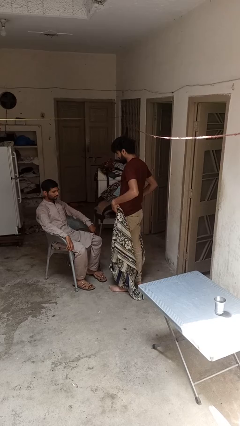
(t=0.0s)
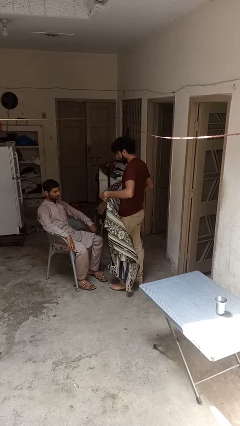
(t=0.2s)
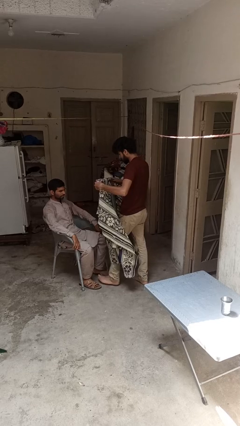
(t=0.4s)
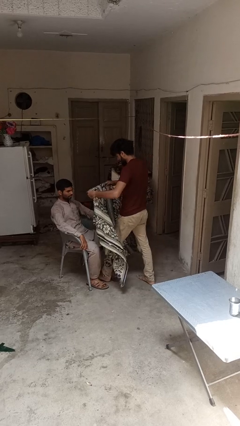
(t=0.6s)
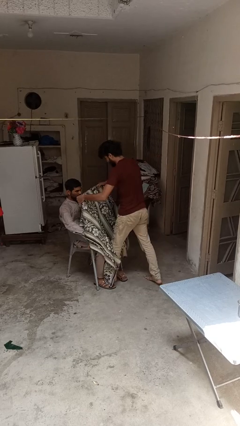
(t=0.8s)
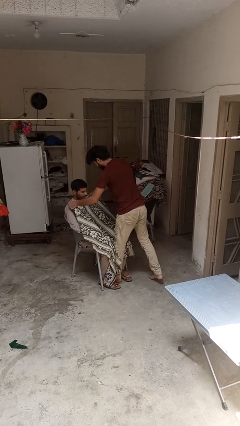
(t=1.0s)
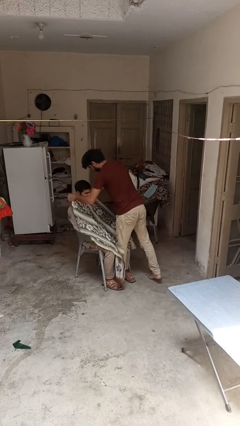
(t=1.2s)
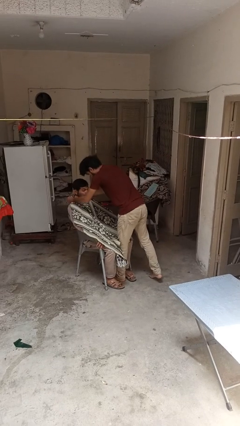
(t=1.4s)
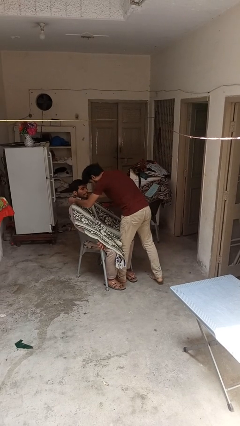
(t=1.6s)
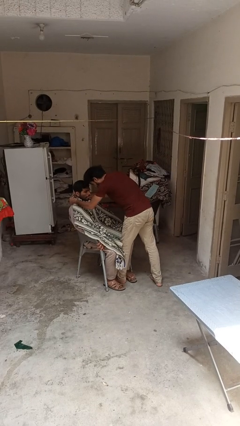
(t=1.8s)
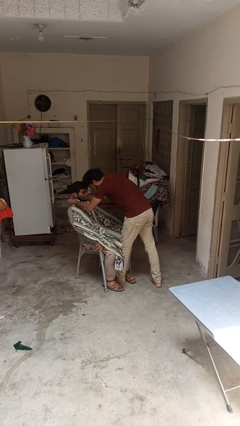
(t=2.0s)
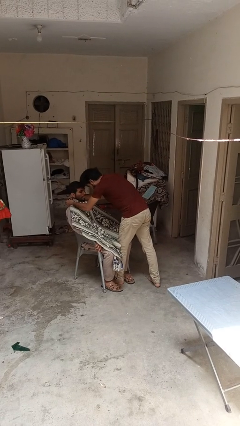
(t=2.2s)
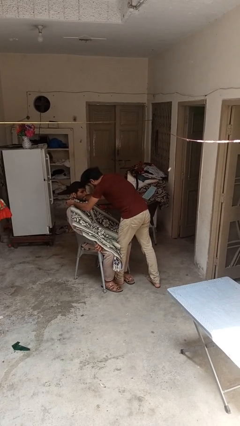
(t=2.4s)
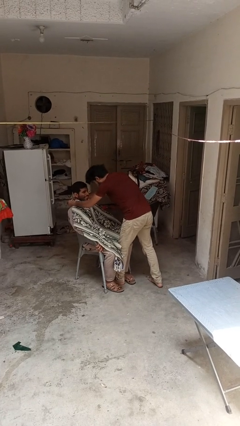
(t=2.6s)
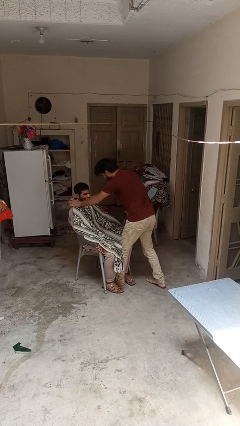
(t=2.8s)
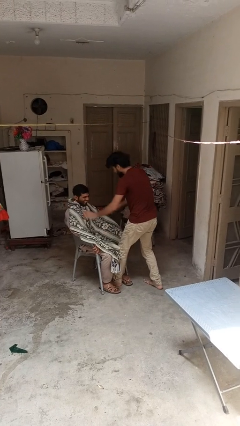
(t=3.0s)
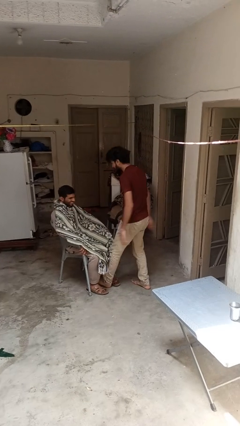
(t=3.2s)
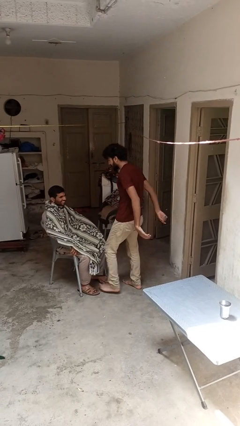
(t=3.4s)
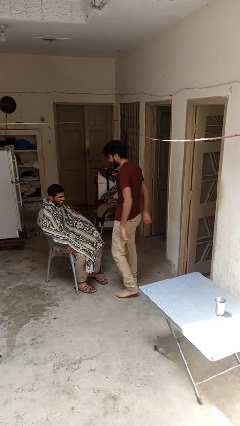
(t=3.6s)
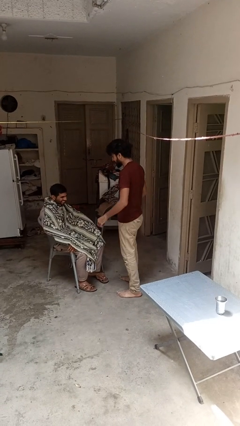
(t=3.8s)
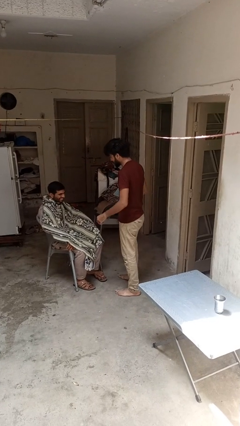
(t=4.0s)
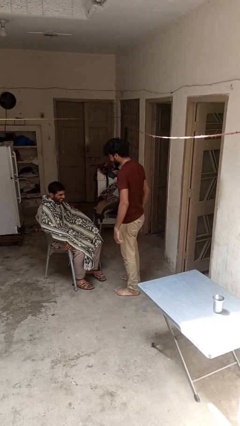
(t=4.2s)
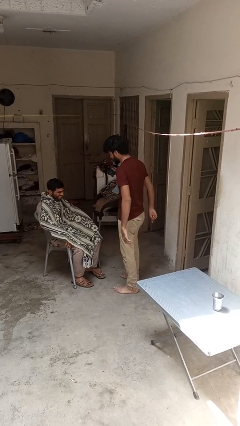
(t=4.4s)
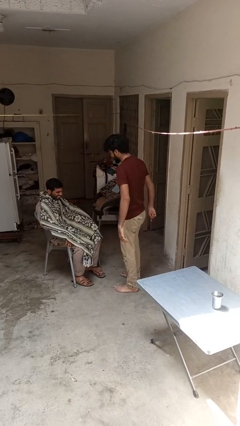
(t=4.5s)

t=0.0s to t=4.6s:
person covers friend with blanket

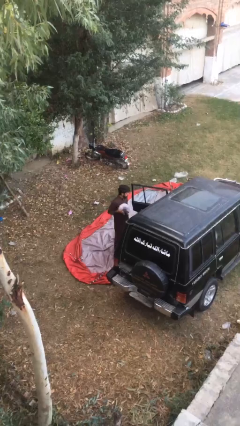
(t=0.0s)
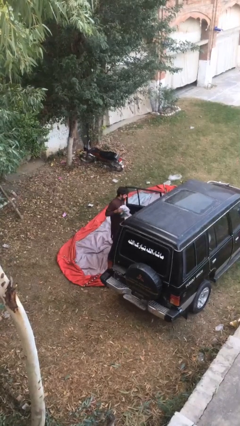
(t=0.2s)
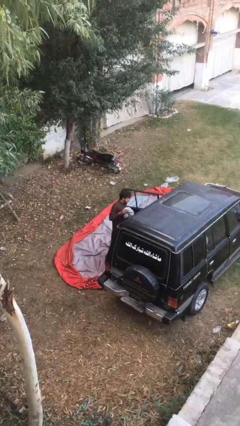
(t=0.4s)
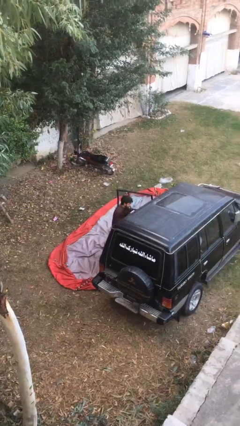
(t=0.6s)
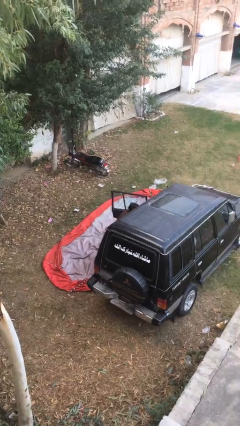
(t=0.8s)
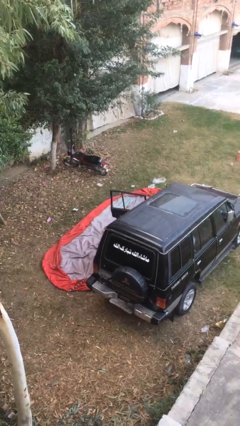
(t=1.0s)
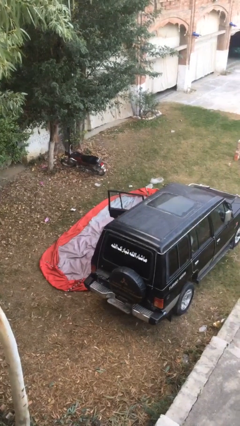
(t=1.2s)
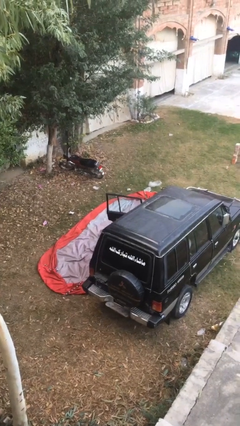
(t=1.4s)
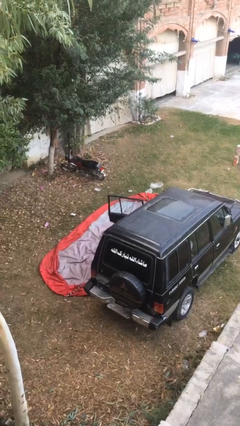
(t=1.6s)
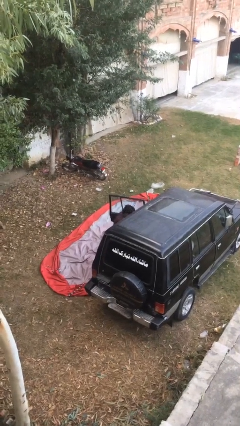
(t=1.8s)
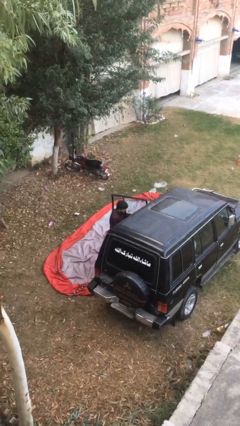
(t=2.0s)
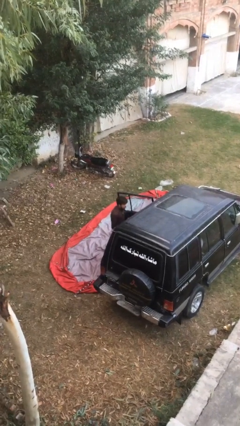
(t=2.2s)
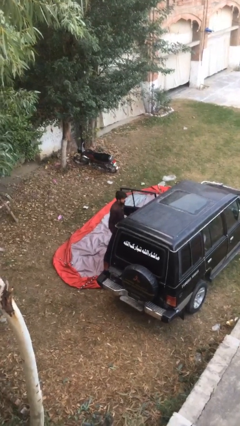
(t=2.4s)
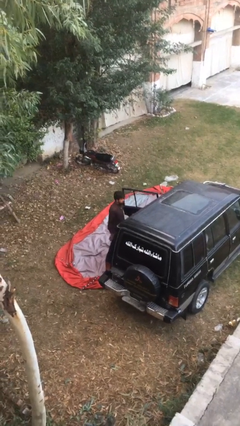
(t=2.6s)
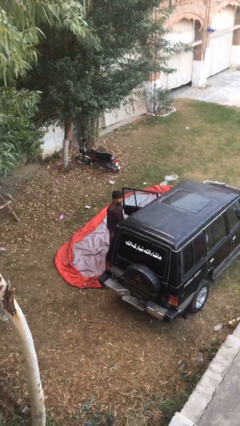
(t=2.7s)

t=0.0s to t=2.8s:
person loads car

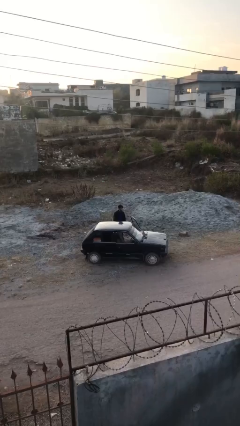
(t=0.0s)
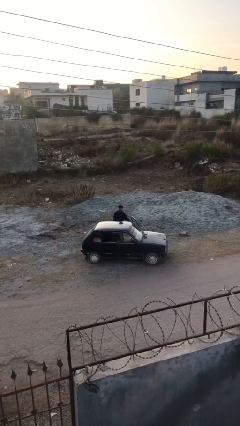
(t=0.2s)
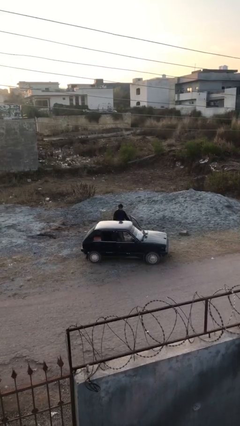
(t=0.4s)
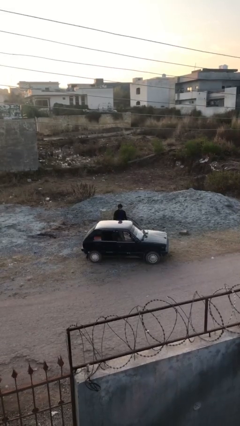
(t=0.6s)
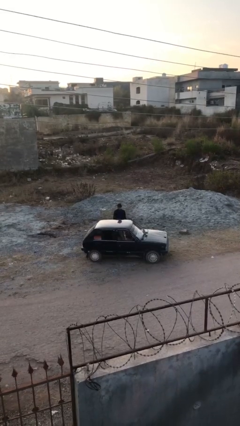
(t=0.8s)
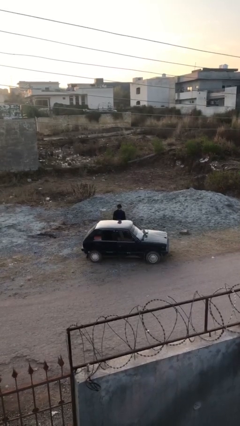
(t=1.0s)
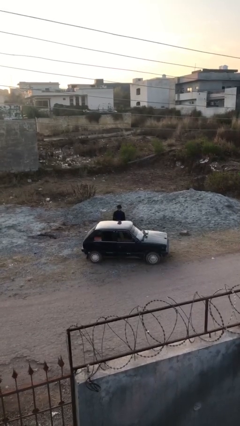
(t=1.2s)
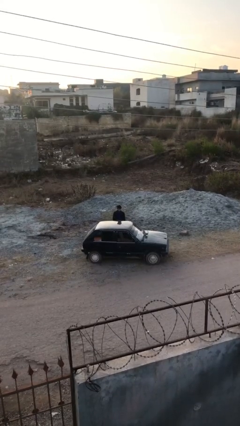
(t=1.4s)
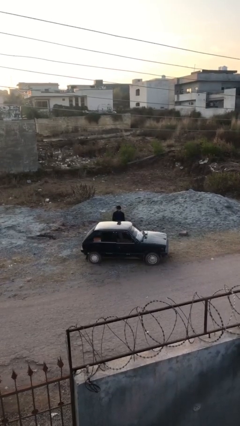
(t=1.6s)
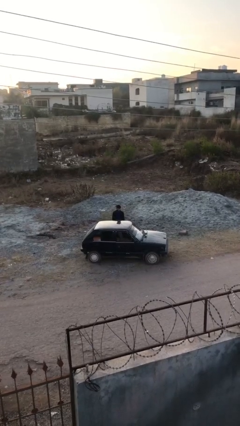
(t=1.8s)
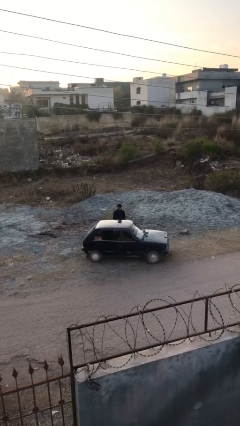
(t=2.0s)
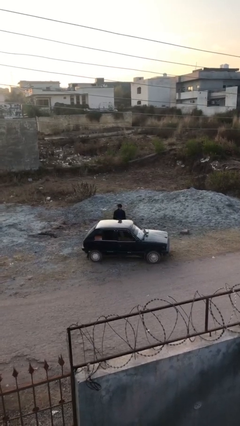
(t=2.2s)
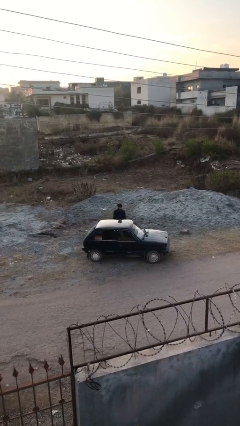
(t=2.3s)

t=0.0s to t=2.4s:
person closes car door

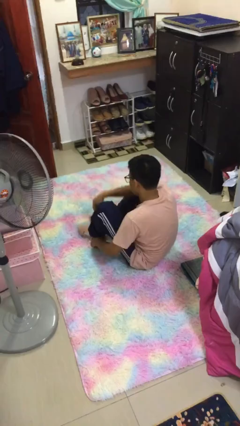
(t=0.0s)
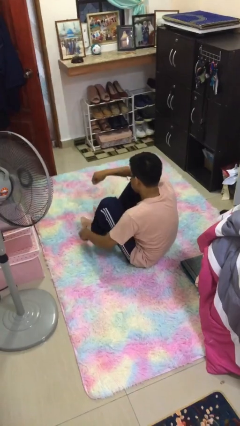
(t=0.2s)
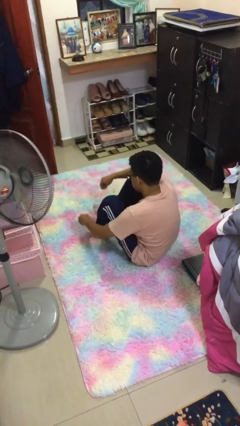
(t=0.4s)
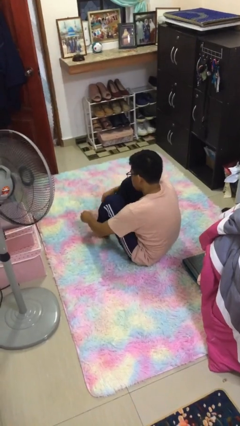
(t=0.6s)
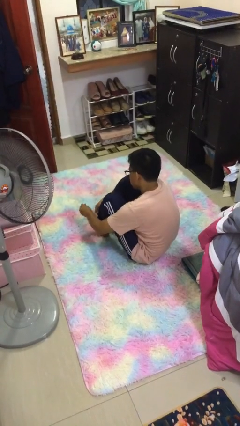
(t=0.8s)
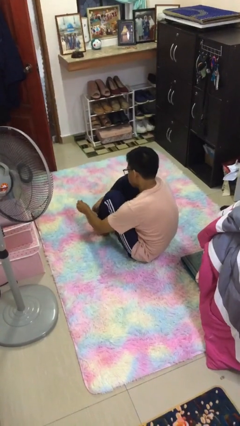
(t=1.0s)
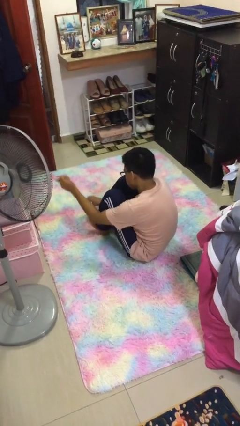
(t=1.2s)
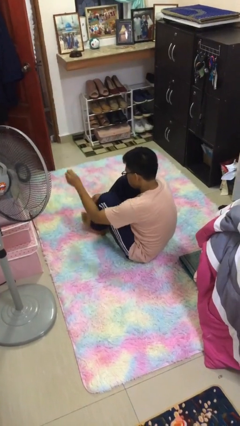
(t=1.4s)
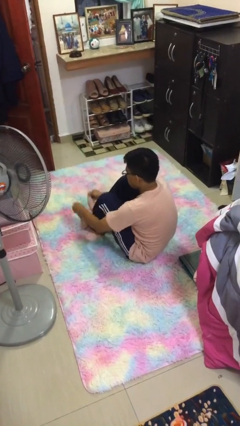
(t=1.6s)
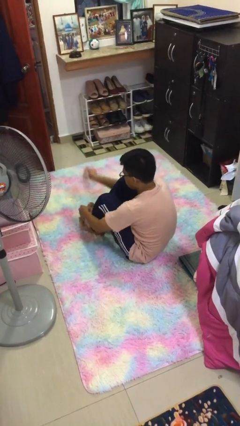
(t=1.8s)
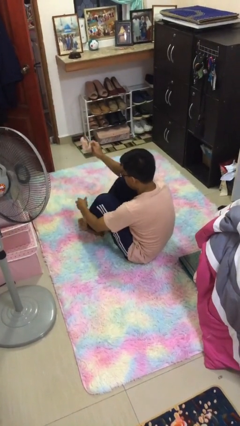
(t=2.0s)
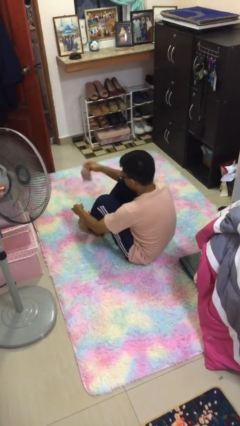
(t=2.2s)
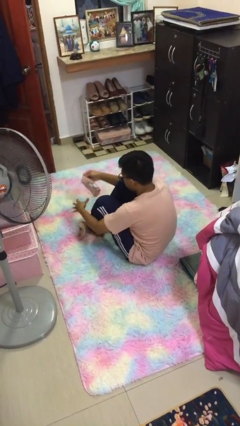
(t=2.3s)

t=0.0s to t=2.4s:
person takes off socks

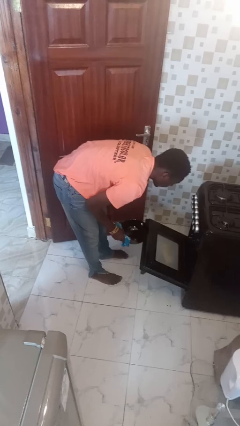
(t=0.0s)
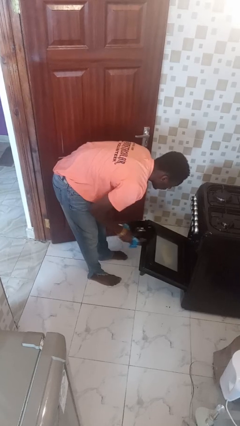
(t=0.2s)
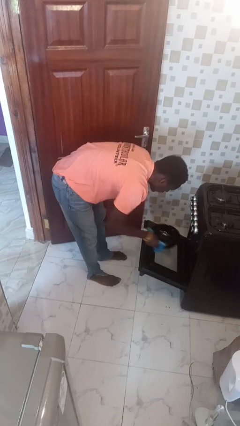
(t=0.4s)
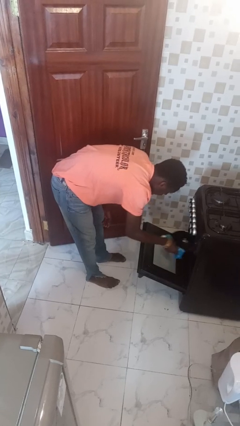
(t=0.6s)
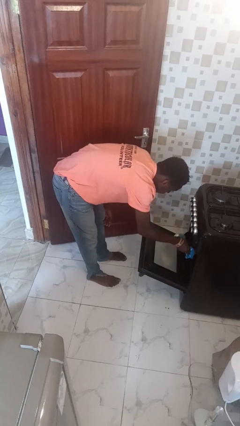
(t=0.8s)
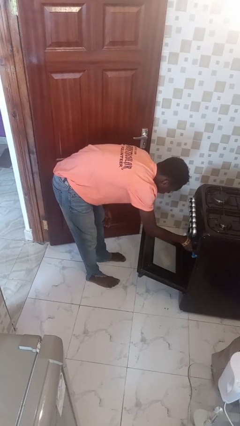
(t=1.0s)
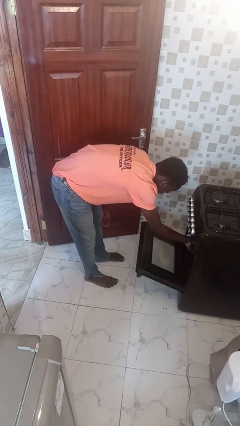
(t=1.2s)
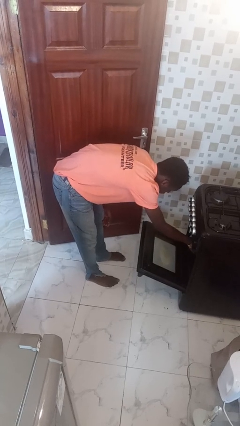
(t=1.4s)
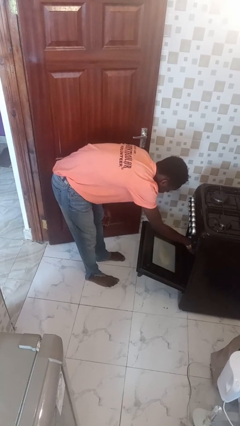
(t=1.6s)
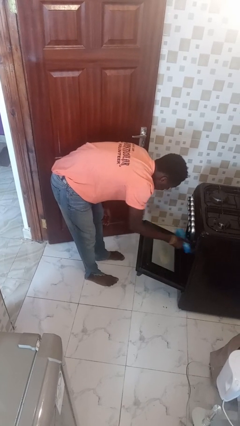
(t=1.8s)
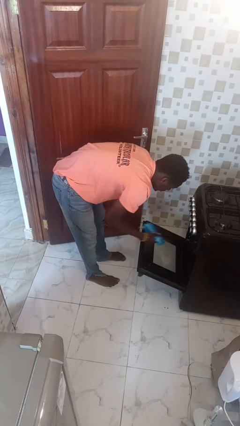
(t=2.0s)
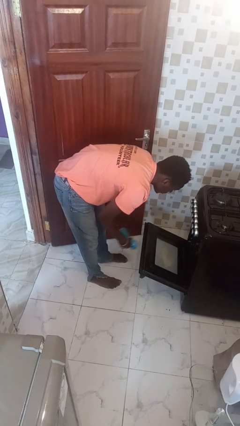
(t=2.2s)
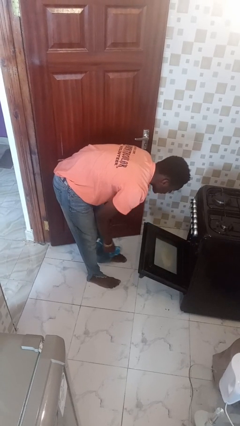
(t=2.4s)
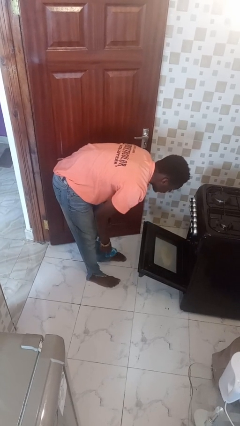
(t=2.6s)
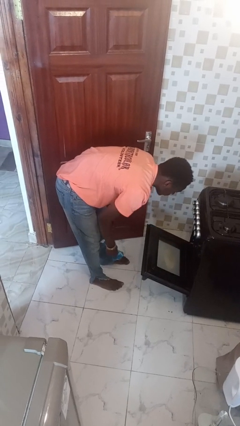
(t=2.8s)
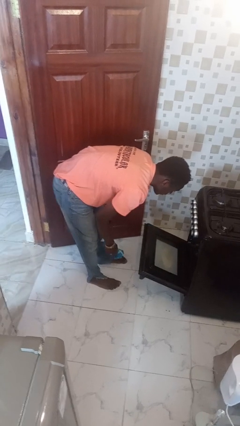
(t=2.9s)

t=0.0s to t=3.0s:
person puts object into oven

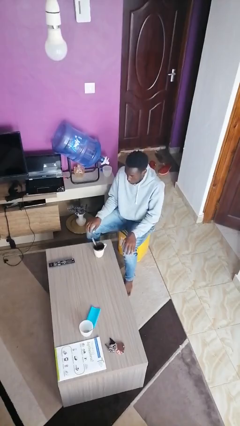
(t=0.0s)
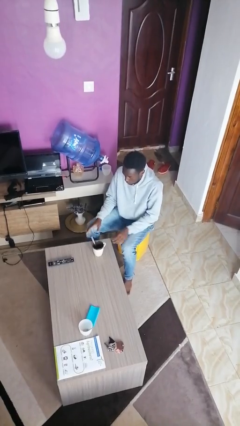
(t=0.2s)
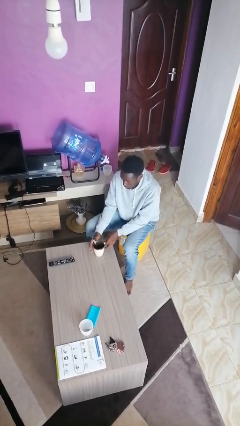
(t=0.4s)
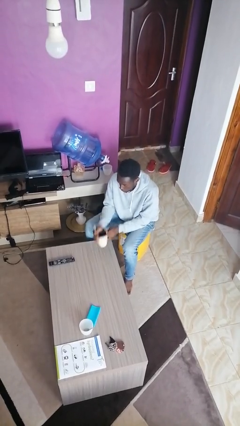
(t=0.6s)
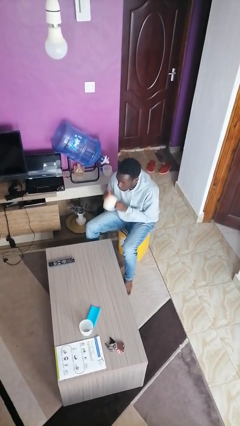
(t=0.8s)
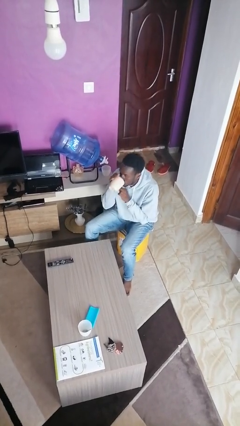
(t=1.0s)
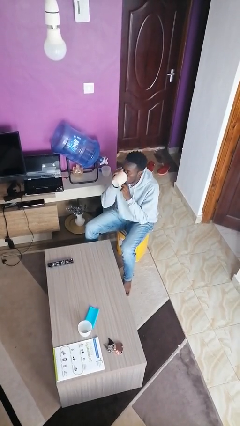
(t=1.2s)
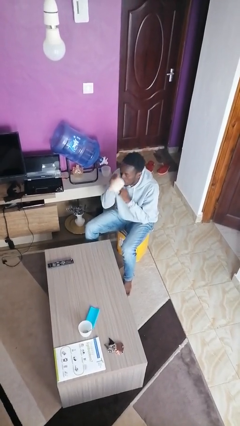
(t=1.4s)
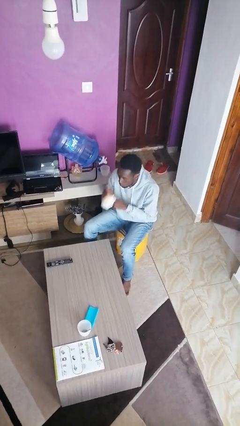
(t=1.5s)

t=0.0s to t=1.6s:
person drinks from mug

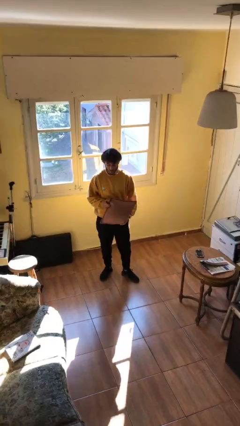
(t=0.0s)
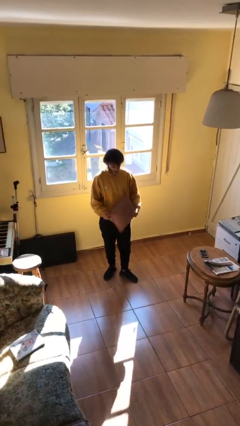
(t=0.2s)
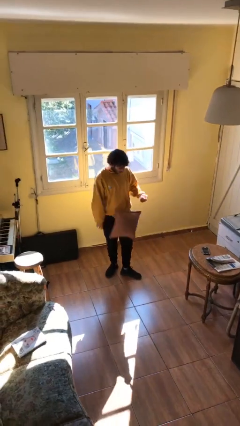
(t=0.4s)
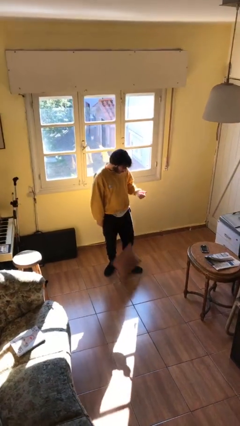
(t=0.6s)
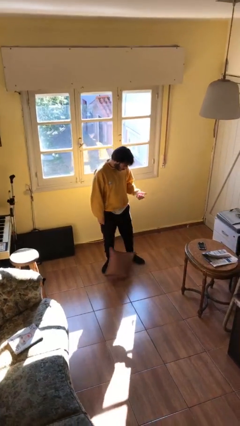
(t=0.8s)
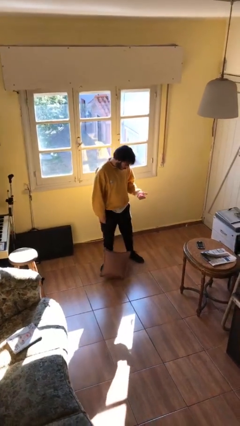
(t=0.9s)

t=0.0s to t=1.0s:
person drops object
